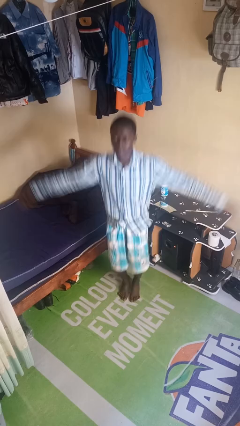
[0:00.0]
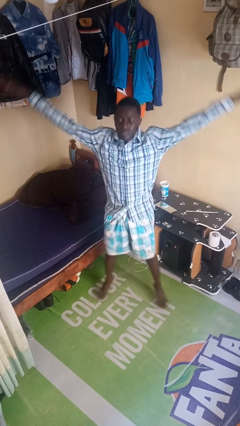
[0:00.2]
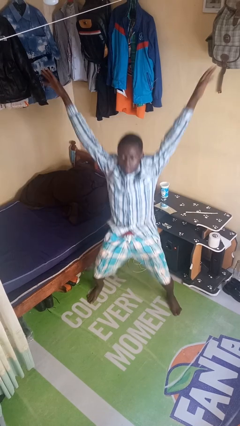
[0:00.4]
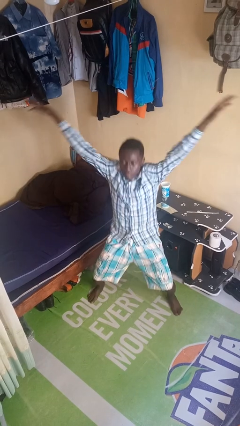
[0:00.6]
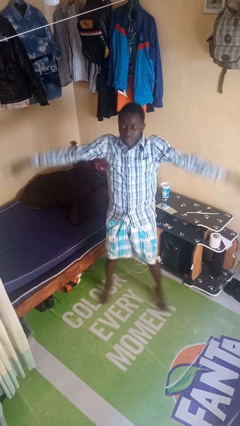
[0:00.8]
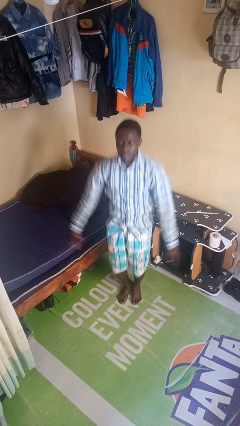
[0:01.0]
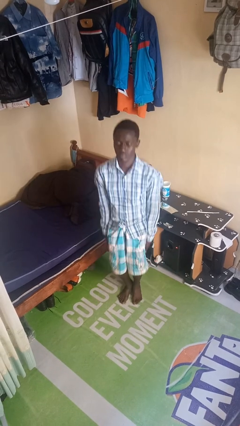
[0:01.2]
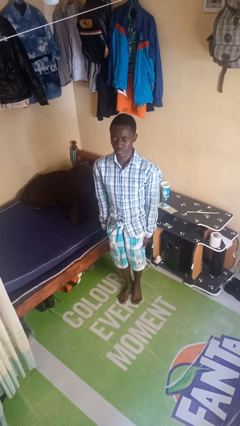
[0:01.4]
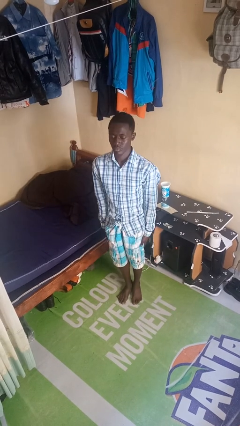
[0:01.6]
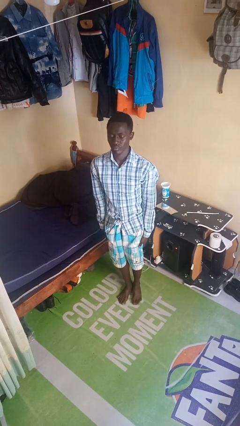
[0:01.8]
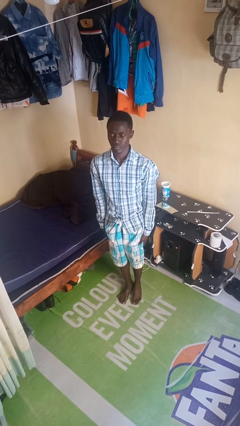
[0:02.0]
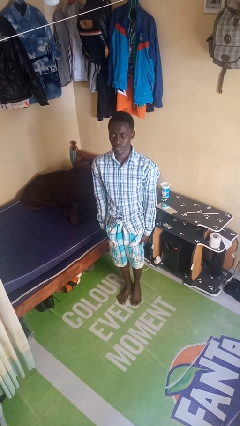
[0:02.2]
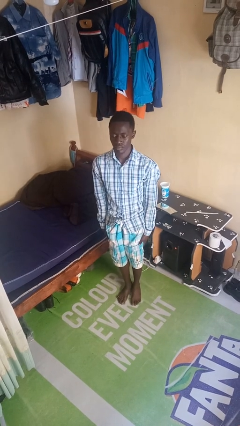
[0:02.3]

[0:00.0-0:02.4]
person exercises with jumping jacks

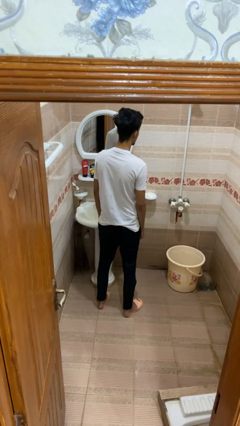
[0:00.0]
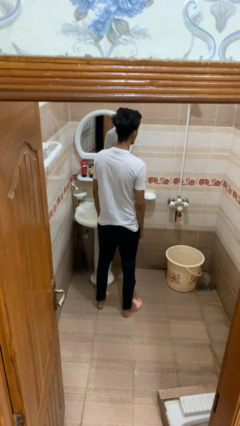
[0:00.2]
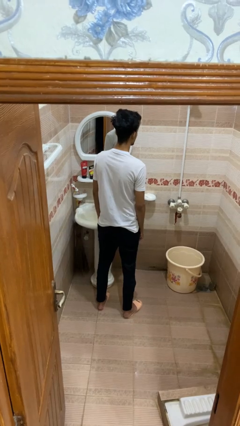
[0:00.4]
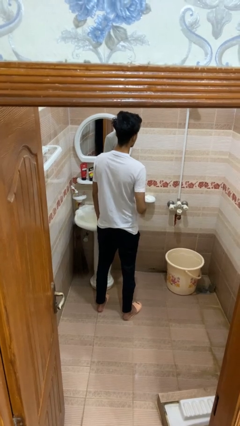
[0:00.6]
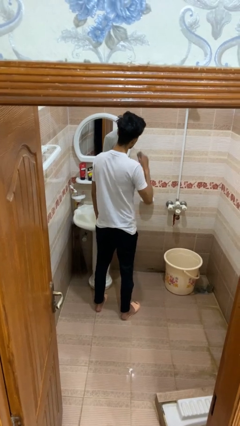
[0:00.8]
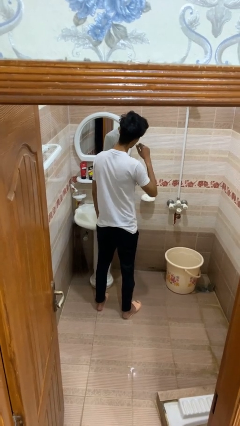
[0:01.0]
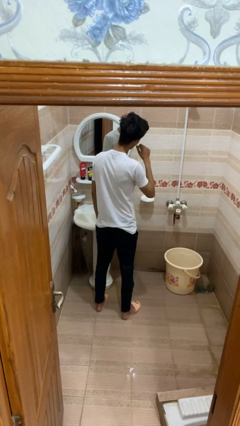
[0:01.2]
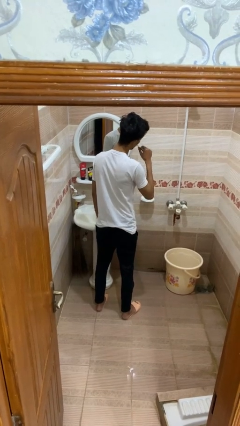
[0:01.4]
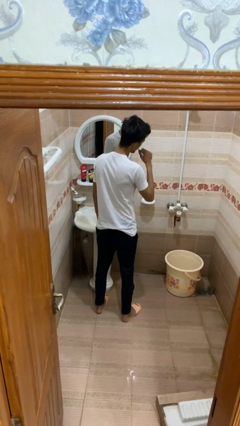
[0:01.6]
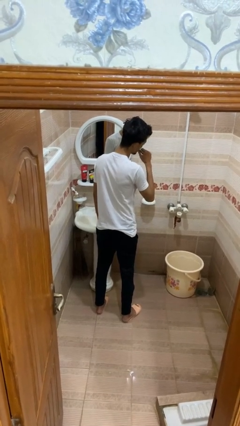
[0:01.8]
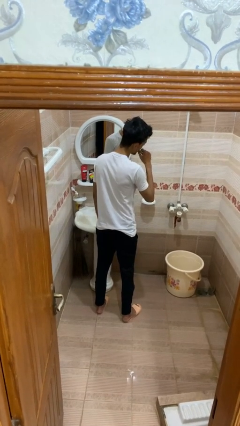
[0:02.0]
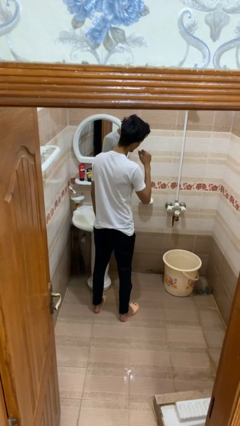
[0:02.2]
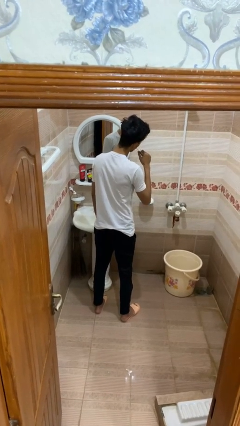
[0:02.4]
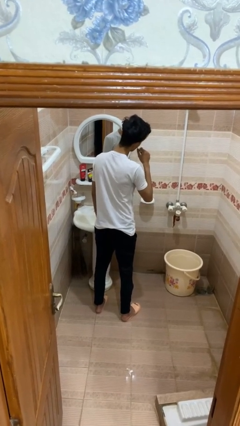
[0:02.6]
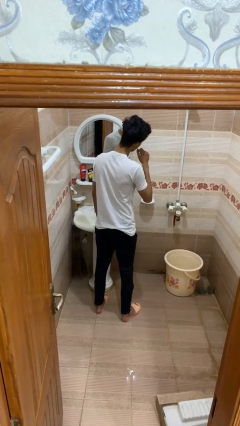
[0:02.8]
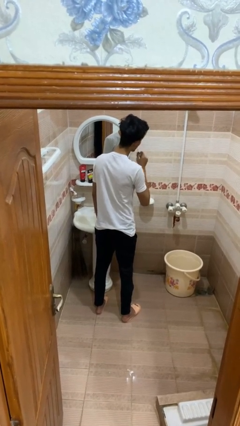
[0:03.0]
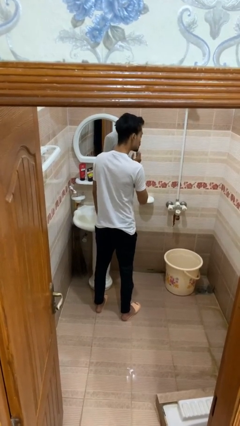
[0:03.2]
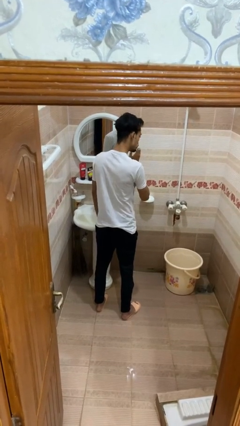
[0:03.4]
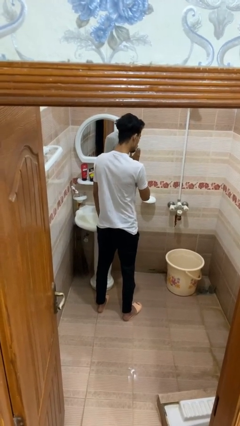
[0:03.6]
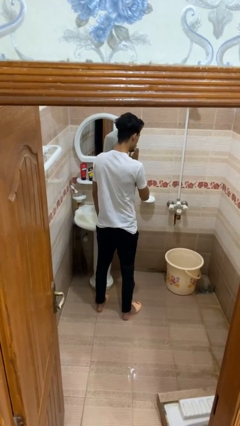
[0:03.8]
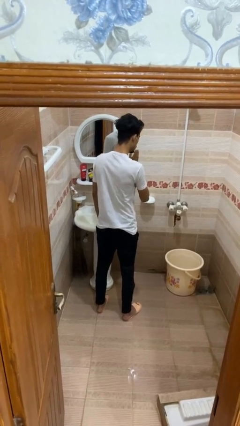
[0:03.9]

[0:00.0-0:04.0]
person brushes teeth

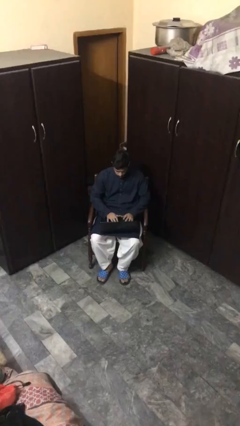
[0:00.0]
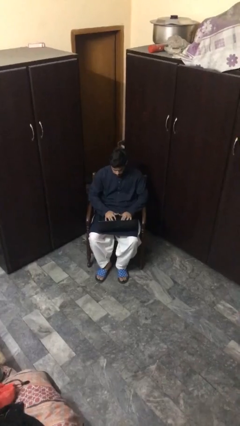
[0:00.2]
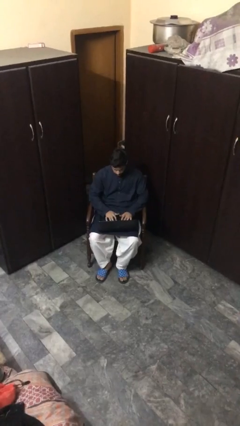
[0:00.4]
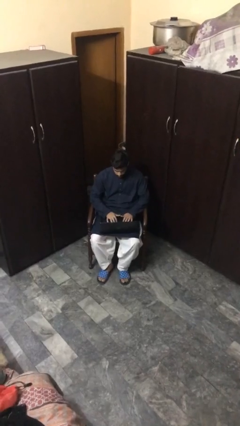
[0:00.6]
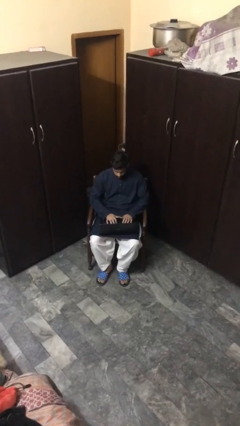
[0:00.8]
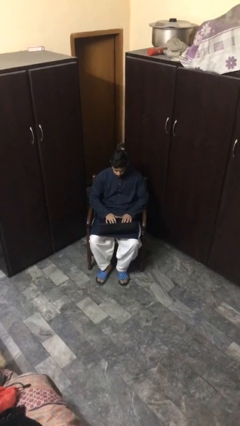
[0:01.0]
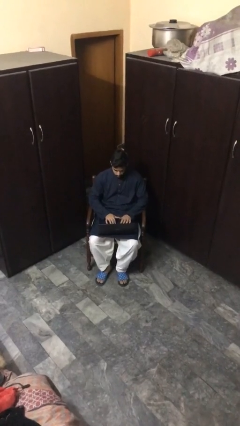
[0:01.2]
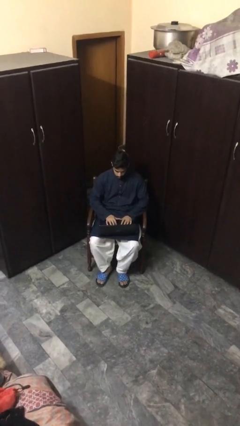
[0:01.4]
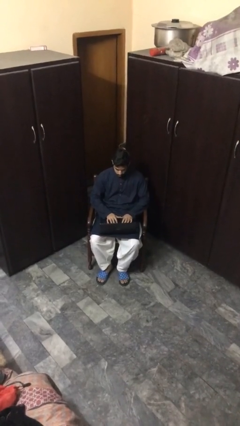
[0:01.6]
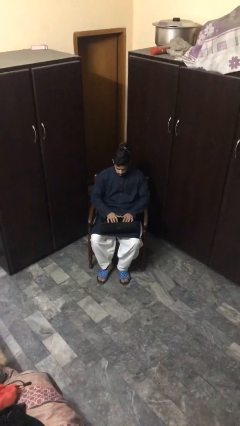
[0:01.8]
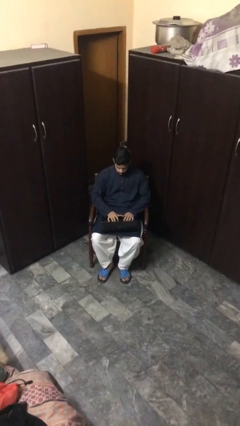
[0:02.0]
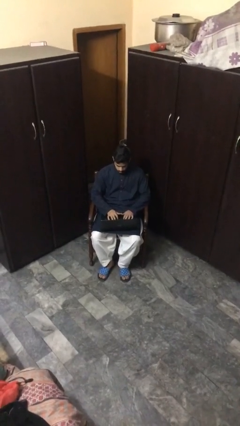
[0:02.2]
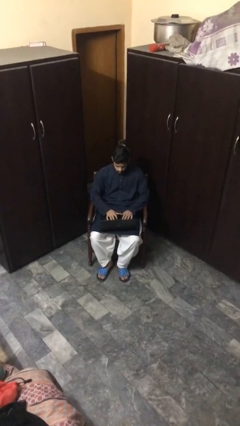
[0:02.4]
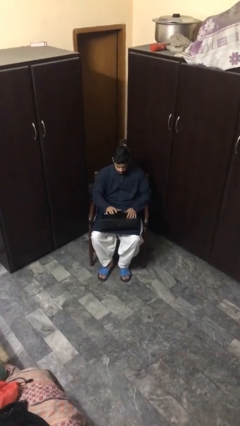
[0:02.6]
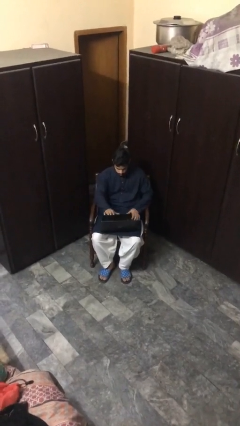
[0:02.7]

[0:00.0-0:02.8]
person interacts with laptop

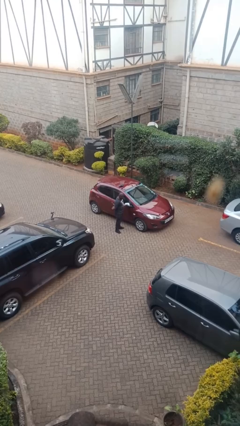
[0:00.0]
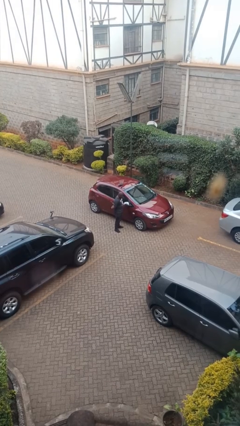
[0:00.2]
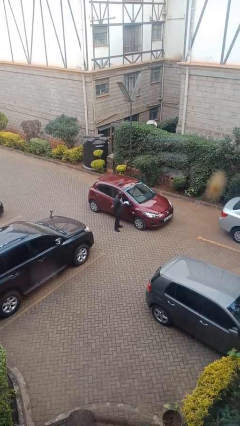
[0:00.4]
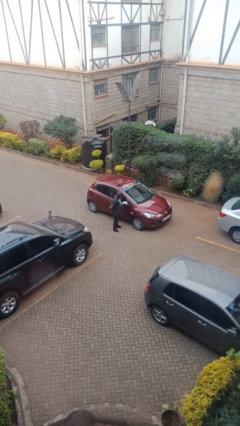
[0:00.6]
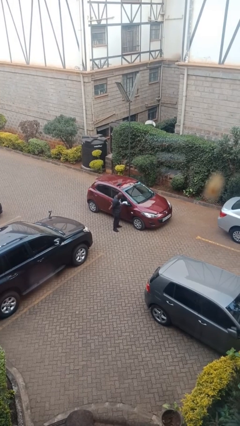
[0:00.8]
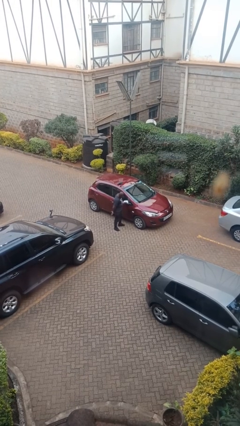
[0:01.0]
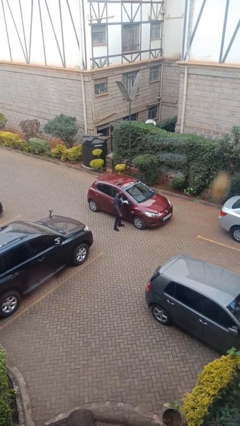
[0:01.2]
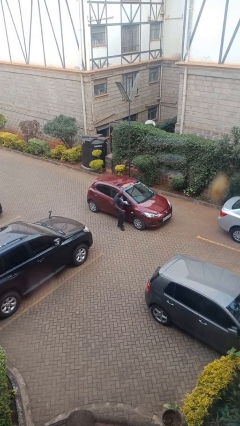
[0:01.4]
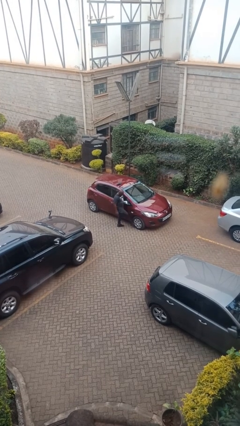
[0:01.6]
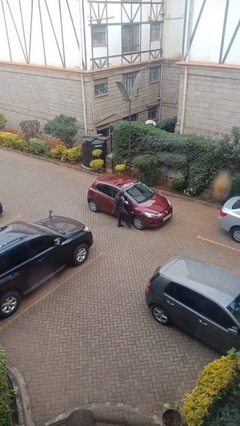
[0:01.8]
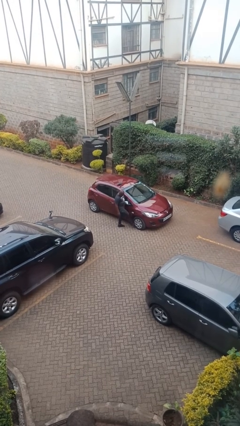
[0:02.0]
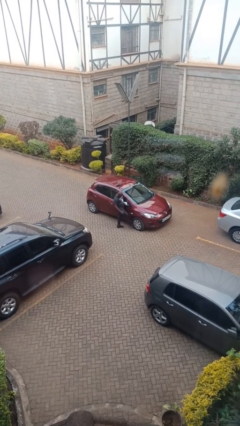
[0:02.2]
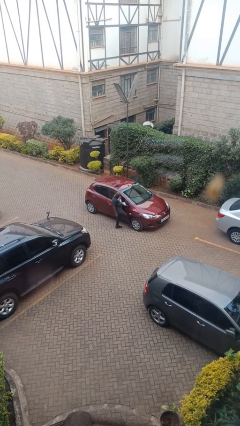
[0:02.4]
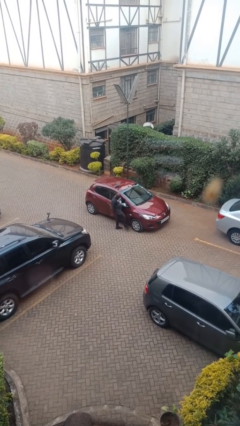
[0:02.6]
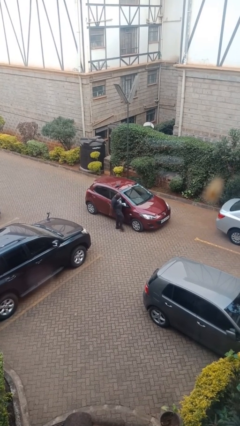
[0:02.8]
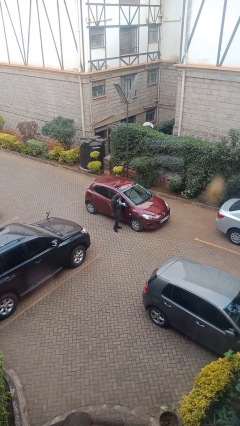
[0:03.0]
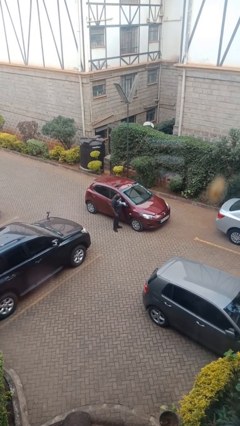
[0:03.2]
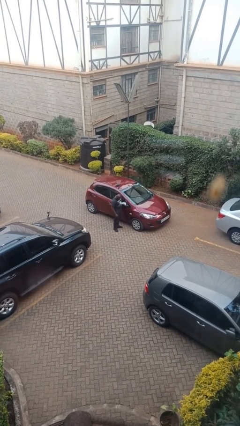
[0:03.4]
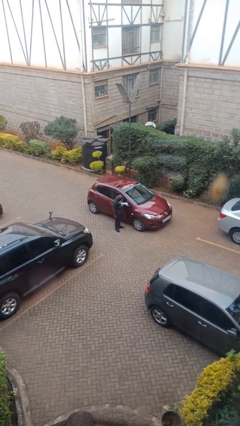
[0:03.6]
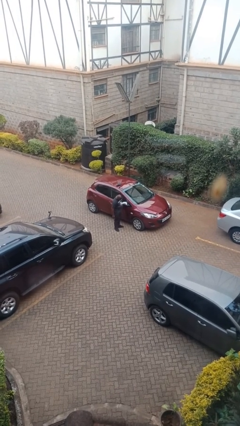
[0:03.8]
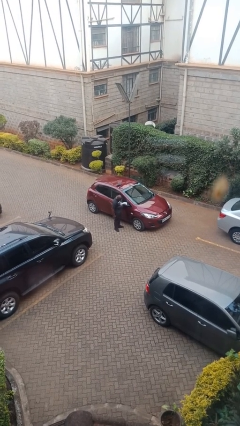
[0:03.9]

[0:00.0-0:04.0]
person kicks car tires

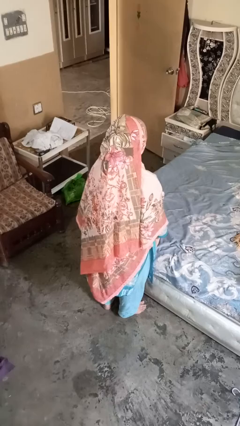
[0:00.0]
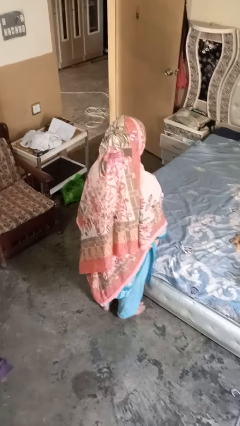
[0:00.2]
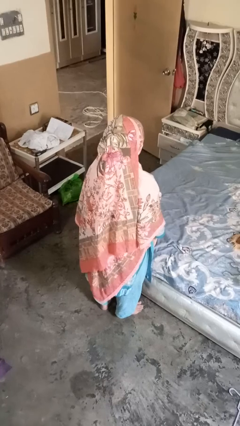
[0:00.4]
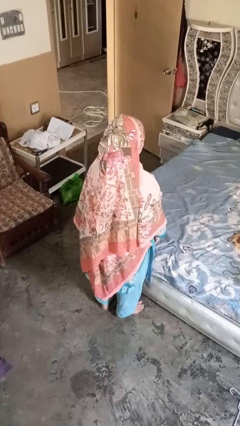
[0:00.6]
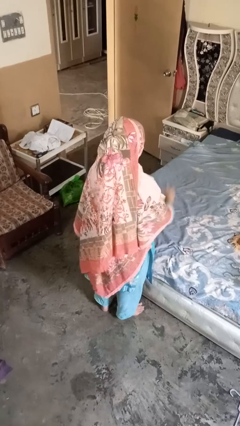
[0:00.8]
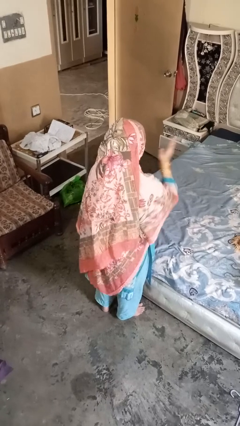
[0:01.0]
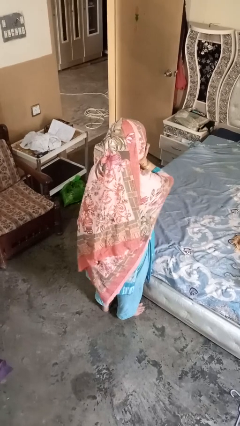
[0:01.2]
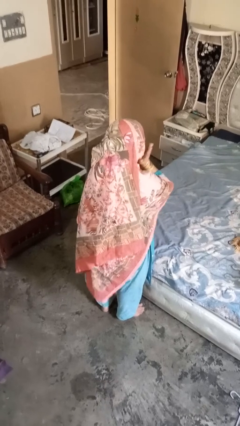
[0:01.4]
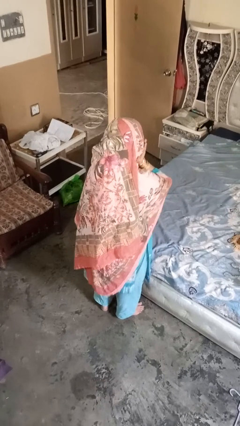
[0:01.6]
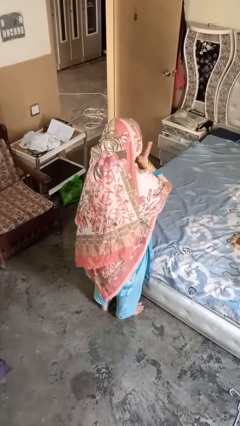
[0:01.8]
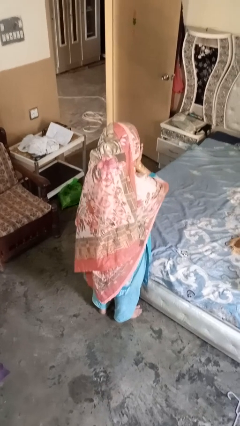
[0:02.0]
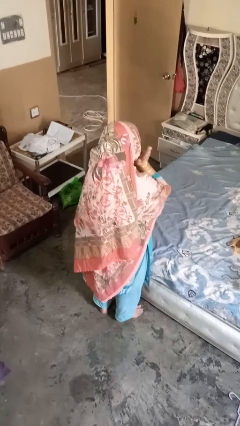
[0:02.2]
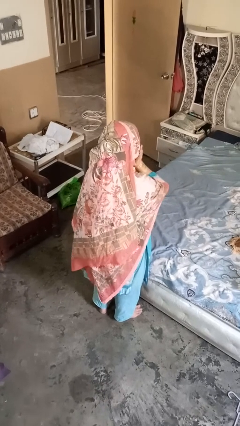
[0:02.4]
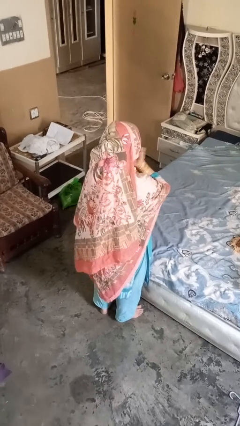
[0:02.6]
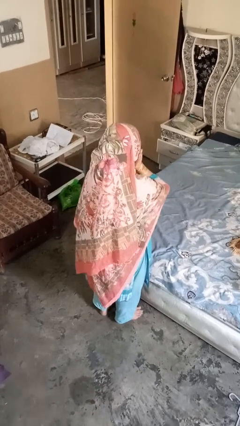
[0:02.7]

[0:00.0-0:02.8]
person strokes chin

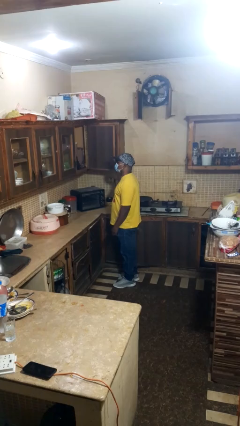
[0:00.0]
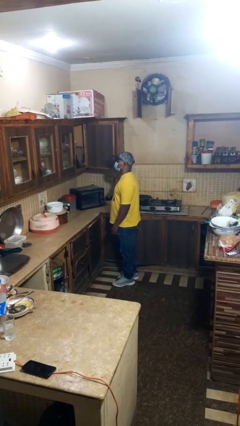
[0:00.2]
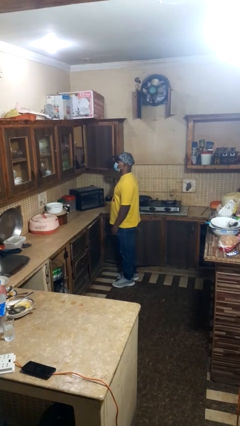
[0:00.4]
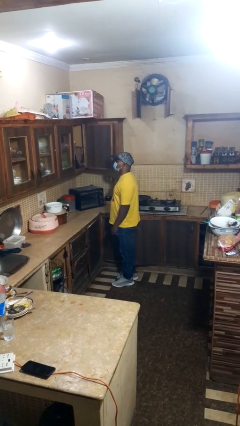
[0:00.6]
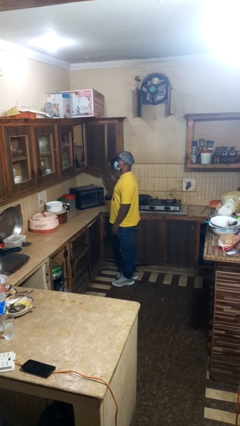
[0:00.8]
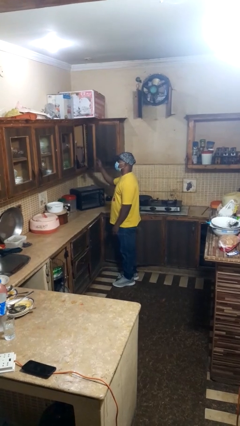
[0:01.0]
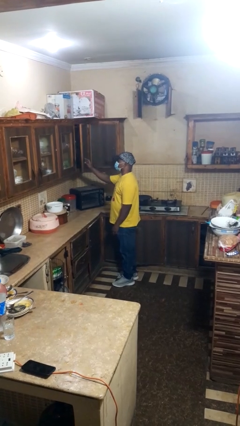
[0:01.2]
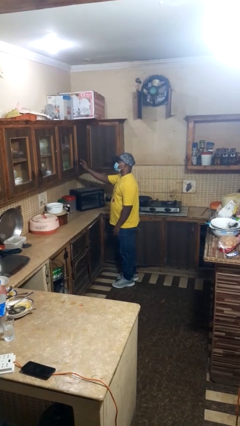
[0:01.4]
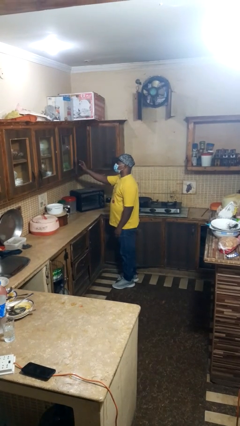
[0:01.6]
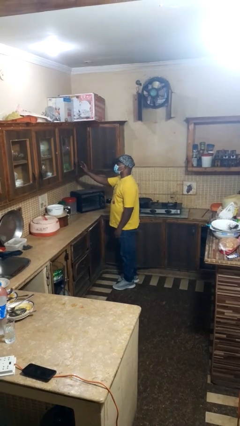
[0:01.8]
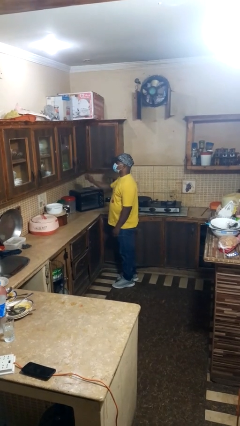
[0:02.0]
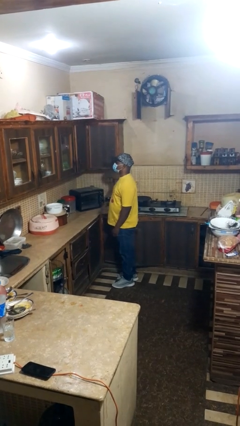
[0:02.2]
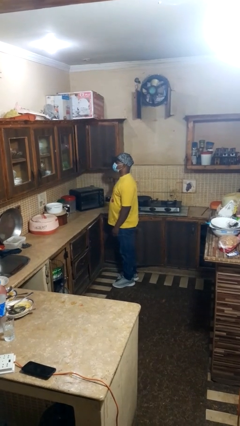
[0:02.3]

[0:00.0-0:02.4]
person closes cabinet
